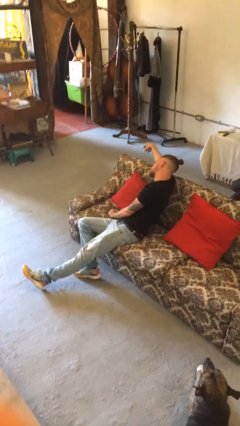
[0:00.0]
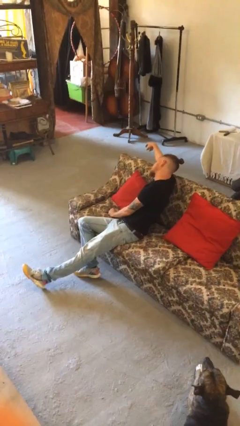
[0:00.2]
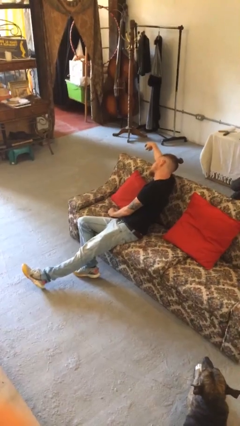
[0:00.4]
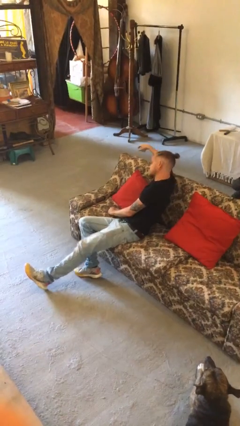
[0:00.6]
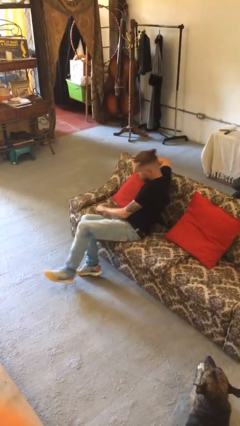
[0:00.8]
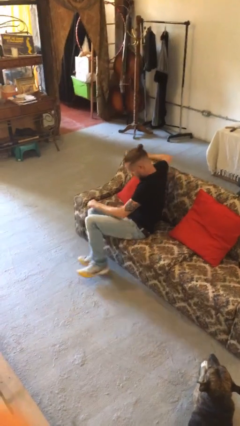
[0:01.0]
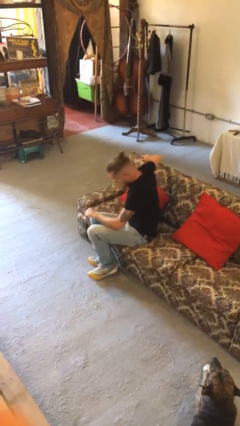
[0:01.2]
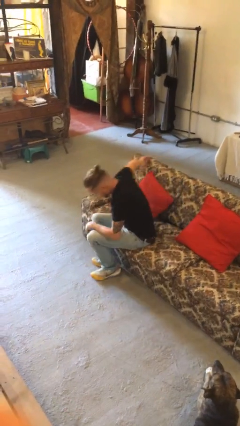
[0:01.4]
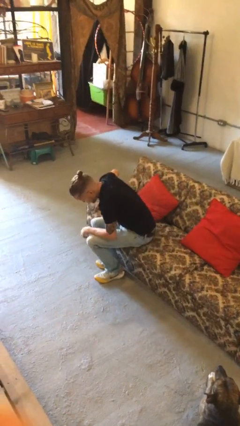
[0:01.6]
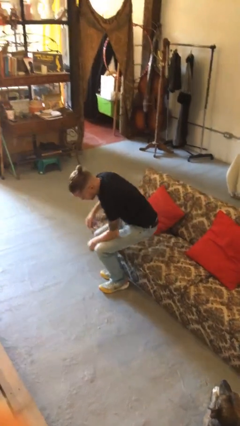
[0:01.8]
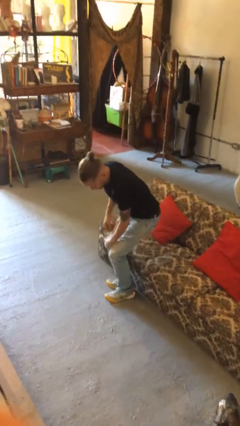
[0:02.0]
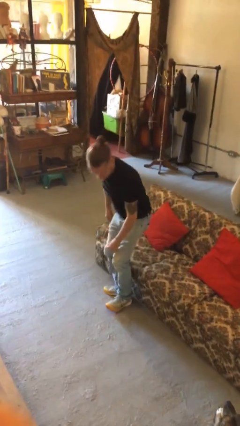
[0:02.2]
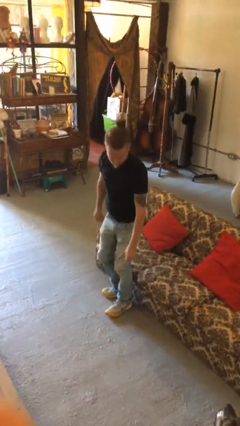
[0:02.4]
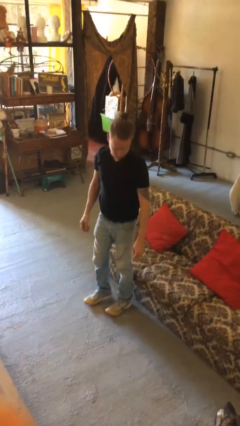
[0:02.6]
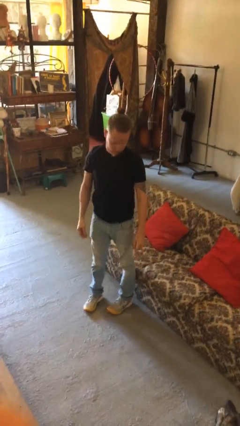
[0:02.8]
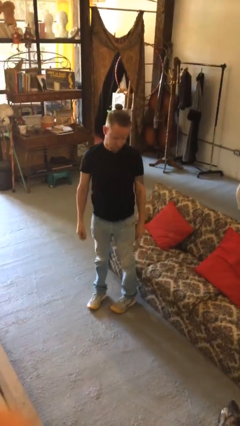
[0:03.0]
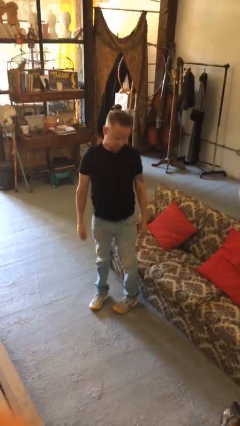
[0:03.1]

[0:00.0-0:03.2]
person stands up

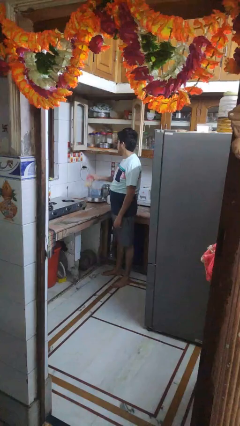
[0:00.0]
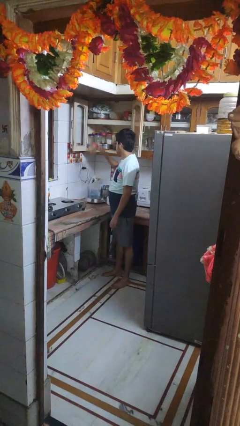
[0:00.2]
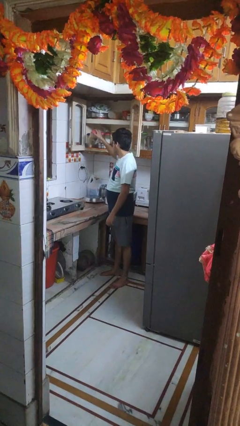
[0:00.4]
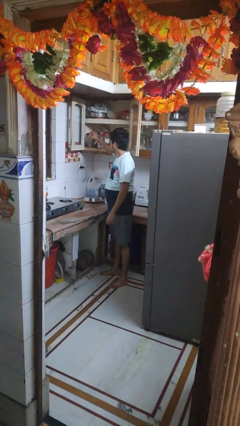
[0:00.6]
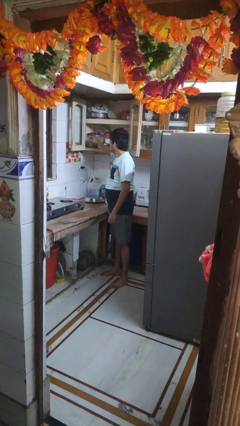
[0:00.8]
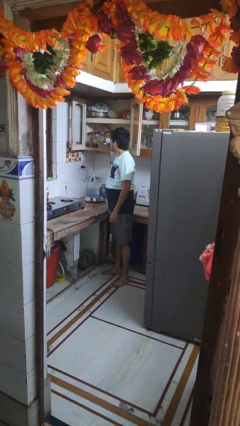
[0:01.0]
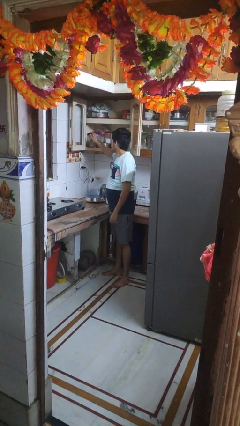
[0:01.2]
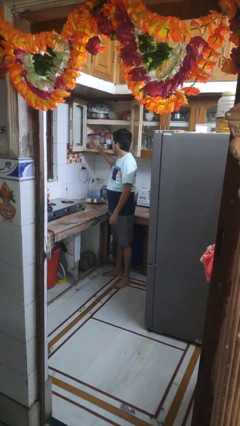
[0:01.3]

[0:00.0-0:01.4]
person puts object in cabinet

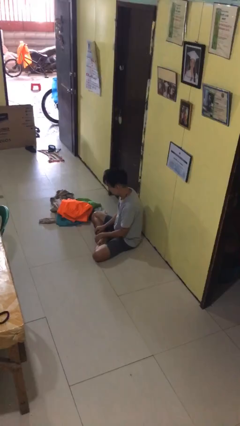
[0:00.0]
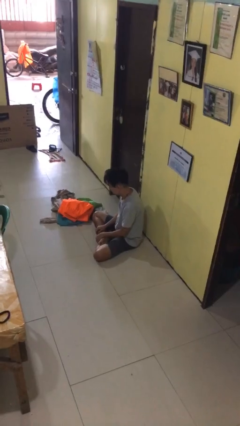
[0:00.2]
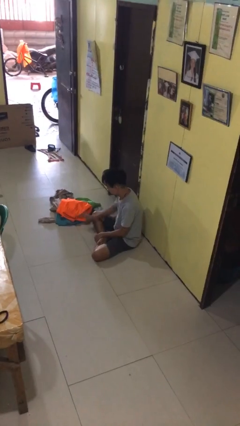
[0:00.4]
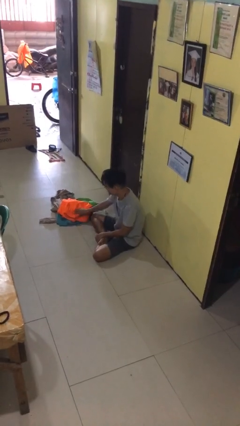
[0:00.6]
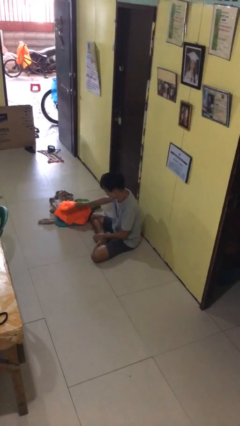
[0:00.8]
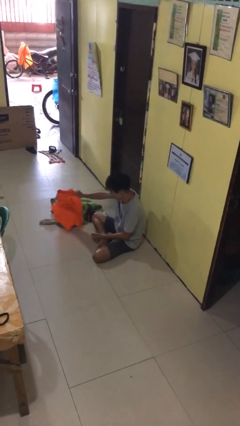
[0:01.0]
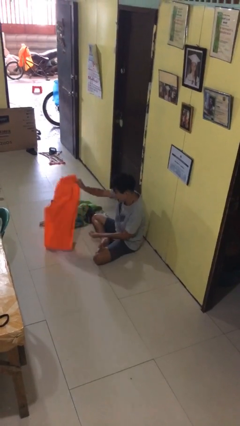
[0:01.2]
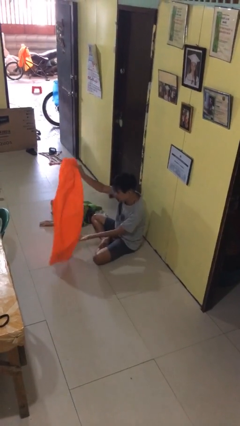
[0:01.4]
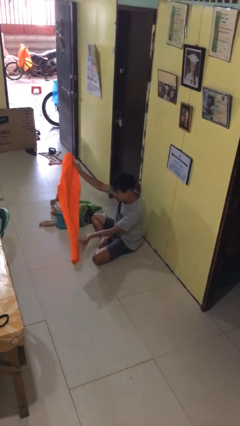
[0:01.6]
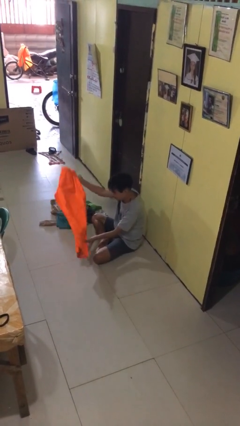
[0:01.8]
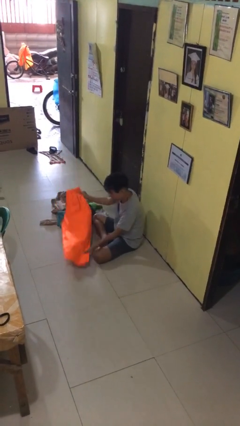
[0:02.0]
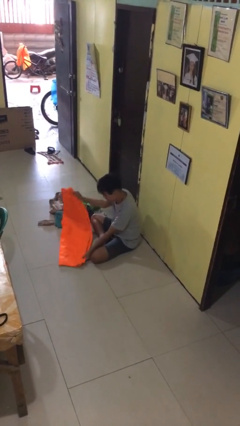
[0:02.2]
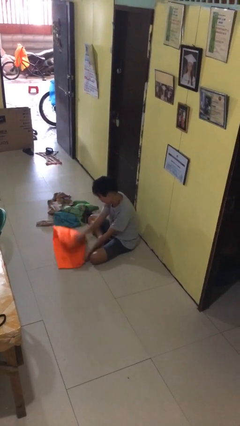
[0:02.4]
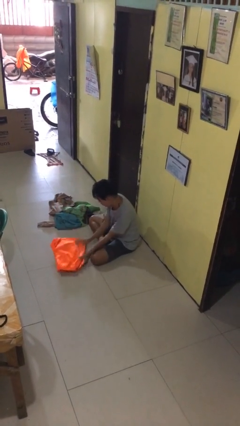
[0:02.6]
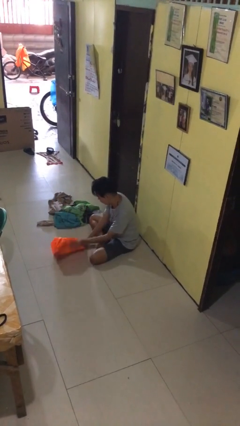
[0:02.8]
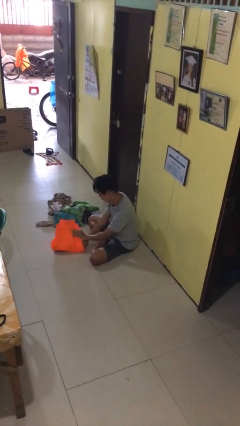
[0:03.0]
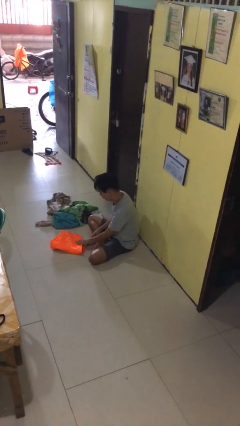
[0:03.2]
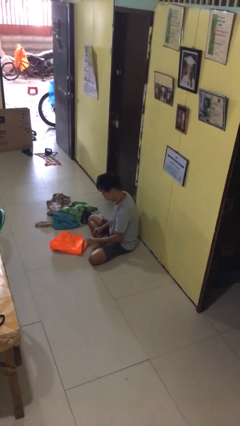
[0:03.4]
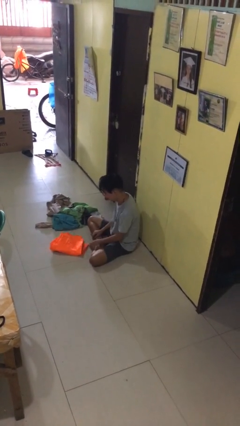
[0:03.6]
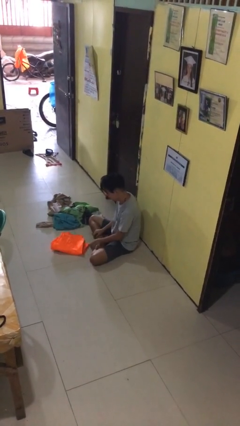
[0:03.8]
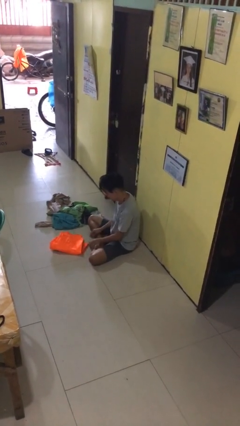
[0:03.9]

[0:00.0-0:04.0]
person folds pants

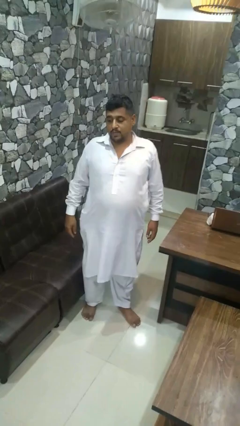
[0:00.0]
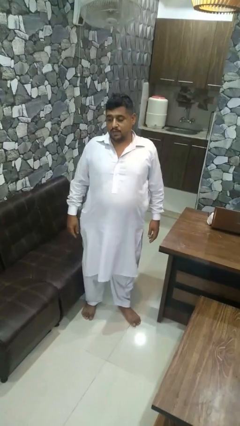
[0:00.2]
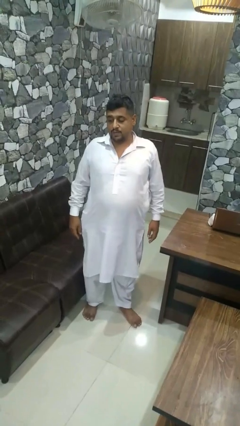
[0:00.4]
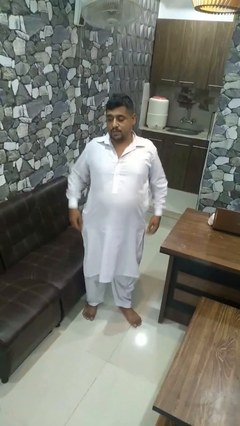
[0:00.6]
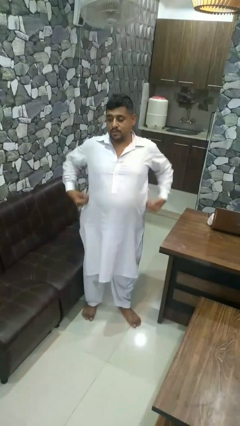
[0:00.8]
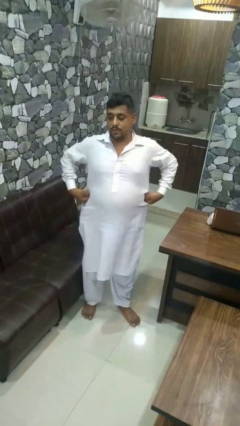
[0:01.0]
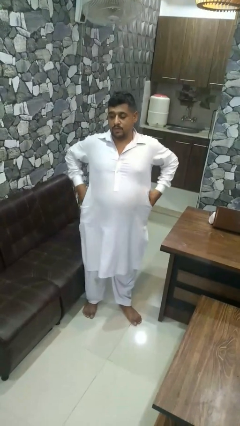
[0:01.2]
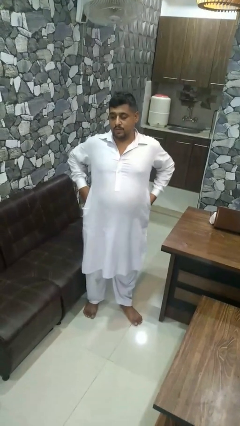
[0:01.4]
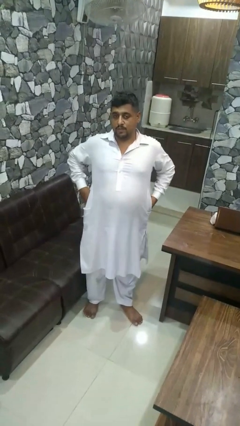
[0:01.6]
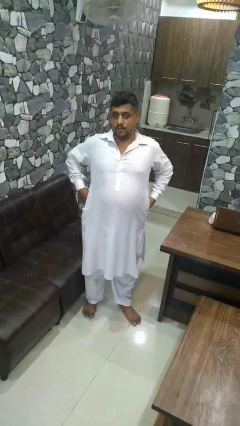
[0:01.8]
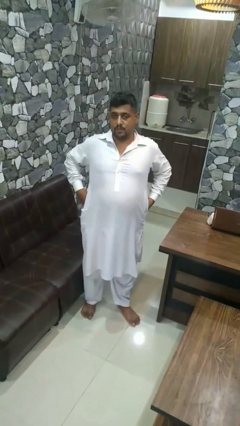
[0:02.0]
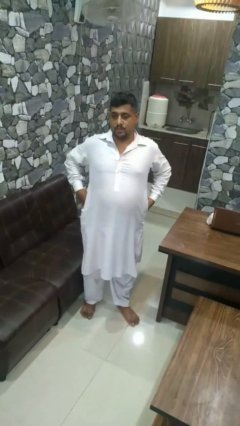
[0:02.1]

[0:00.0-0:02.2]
person puts hands in back pockets

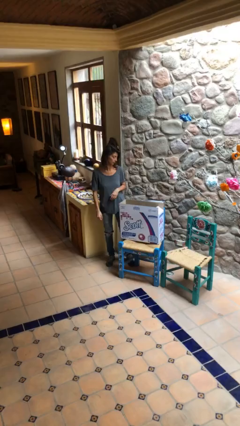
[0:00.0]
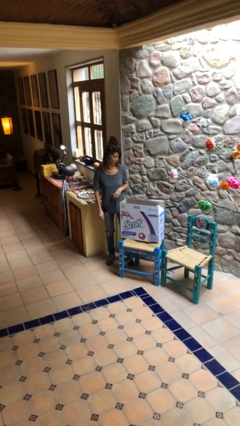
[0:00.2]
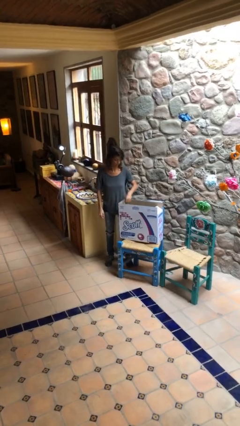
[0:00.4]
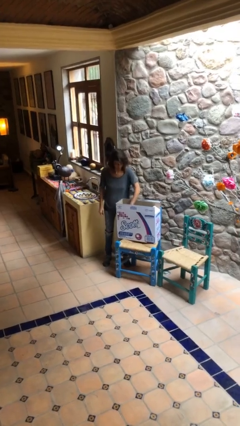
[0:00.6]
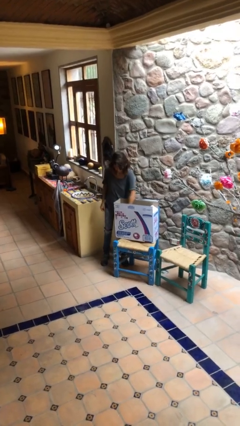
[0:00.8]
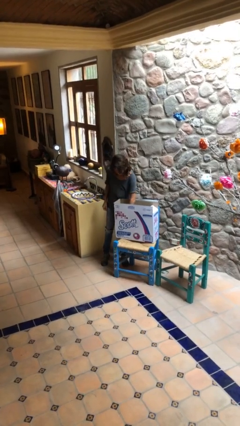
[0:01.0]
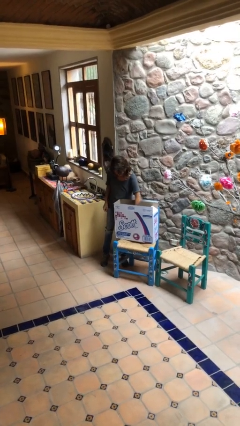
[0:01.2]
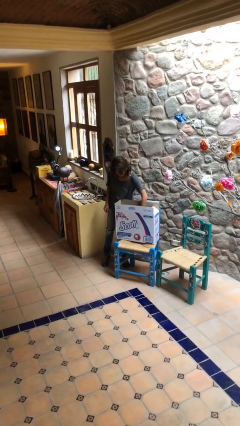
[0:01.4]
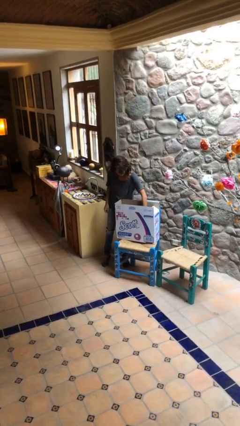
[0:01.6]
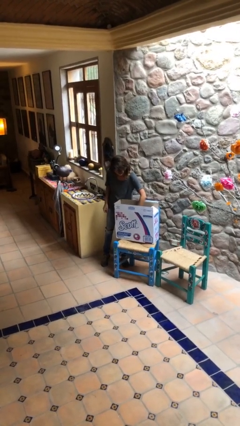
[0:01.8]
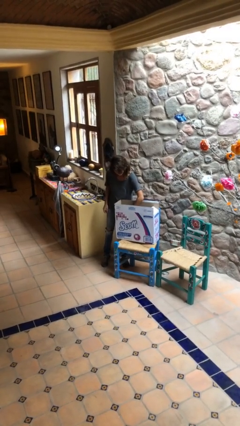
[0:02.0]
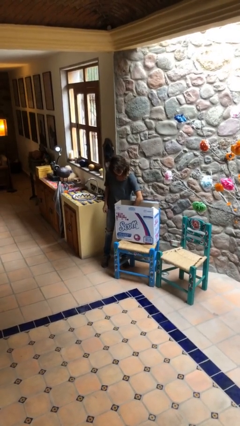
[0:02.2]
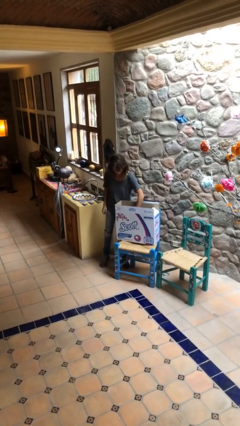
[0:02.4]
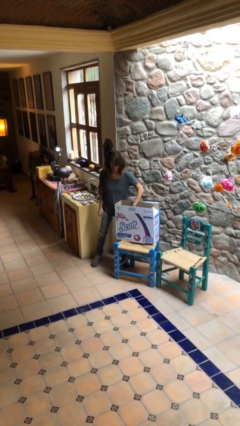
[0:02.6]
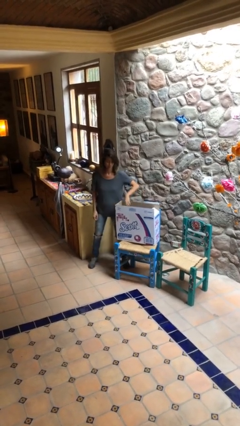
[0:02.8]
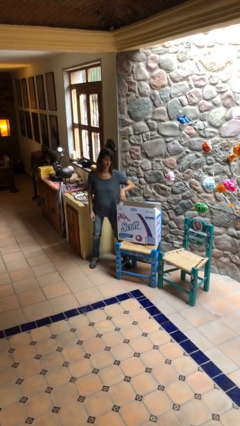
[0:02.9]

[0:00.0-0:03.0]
person searches in box

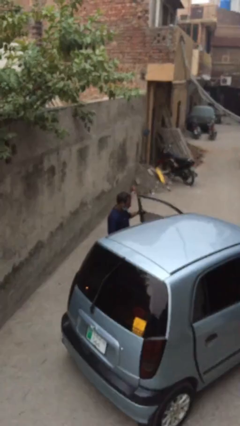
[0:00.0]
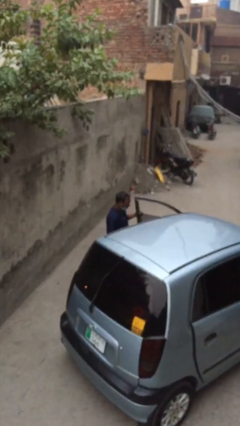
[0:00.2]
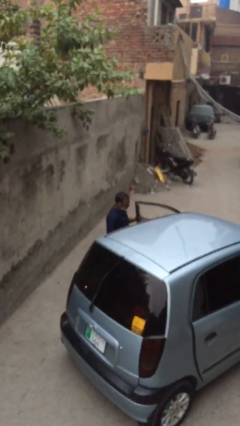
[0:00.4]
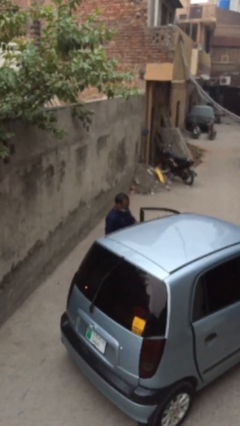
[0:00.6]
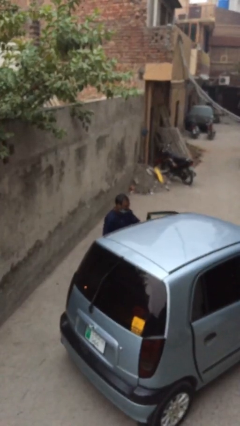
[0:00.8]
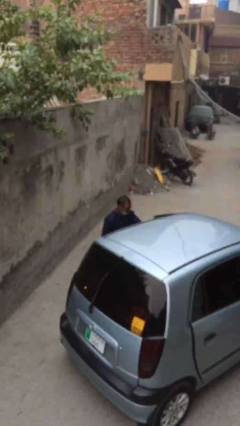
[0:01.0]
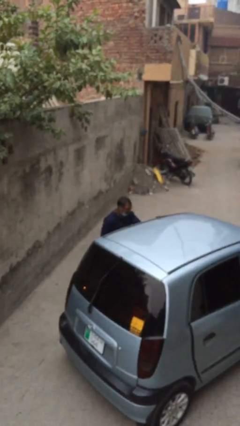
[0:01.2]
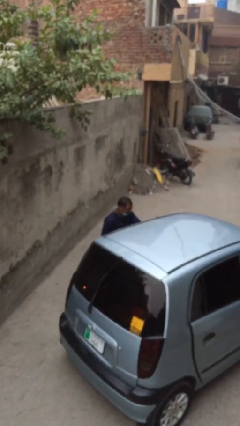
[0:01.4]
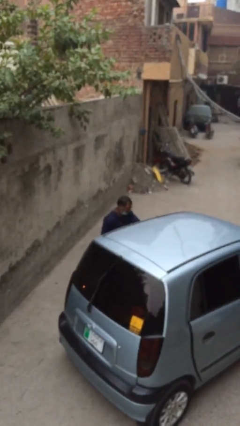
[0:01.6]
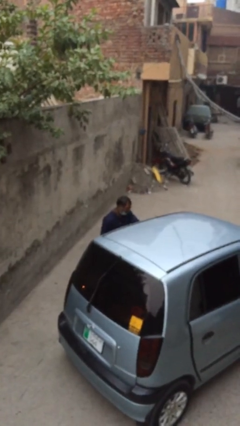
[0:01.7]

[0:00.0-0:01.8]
person closes car door

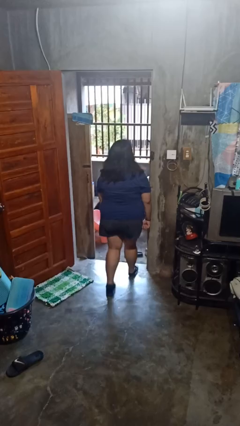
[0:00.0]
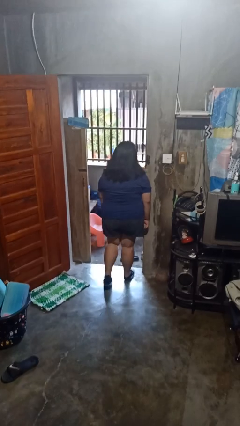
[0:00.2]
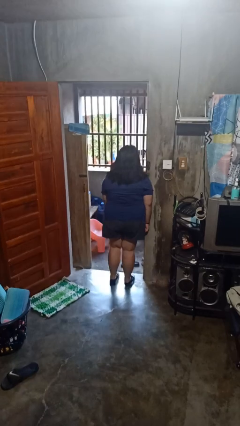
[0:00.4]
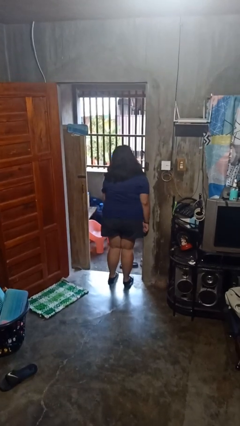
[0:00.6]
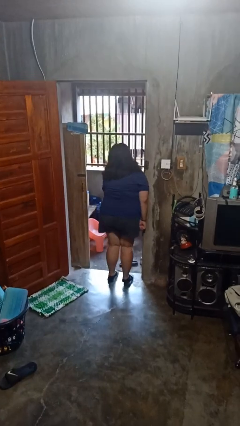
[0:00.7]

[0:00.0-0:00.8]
person bumps into wall

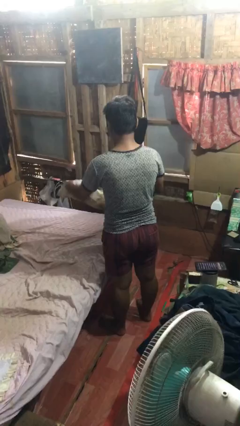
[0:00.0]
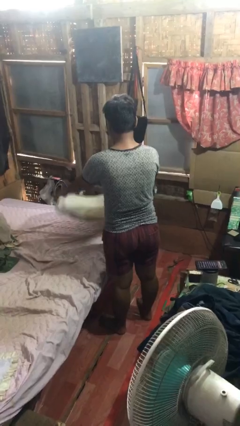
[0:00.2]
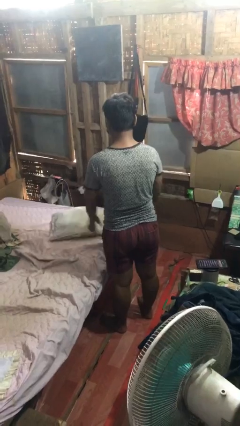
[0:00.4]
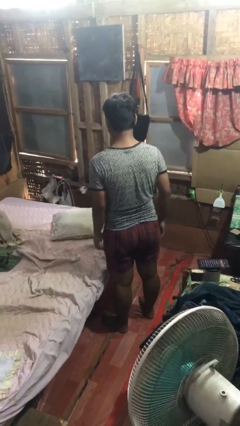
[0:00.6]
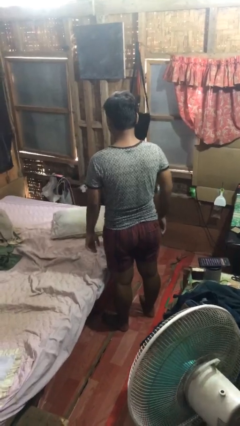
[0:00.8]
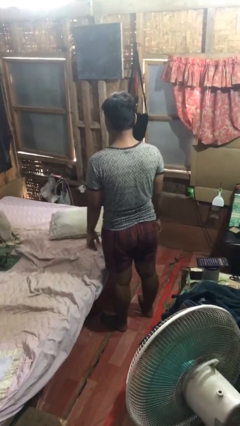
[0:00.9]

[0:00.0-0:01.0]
person puts down object on bed
